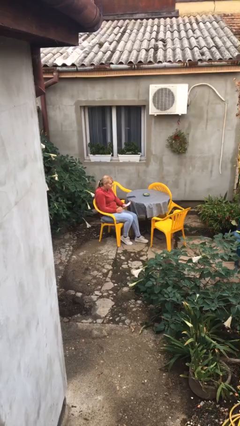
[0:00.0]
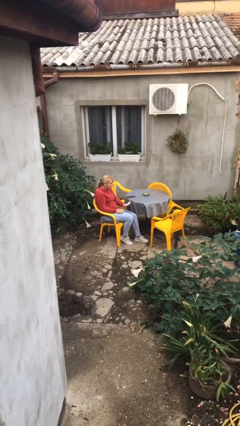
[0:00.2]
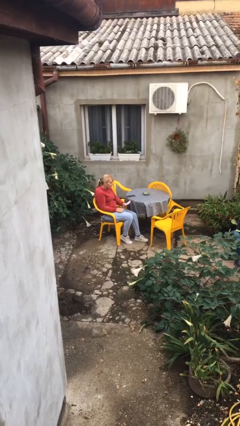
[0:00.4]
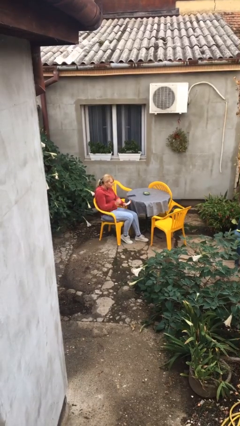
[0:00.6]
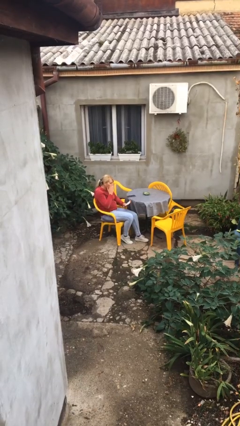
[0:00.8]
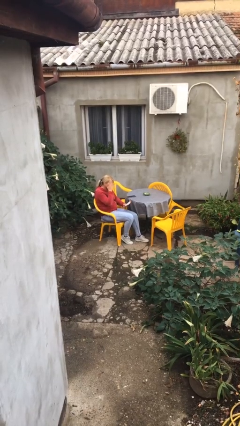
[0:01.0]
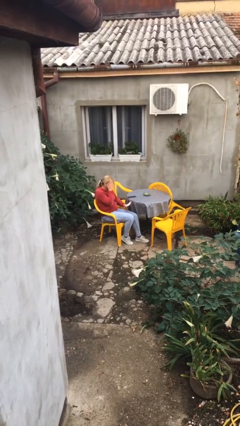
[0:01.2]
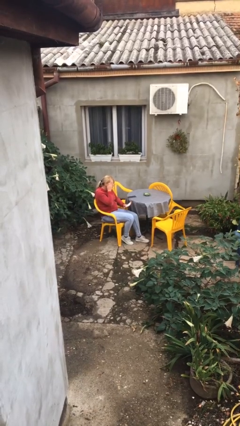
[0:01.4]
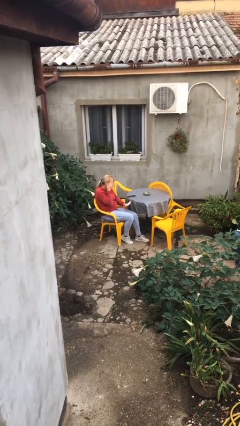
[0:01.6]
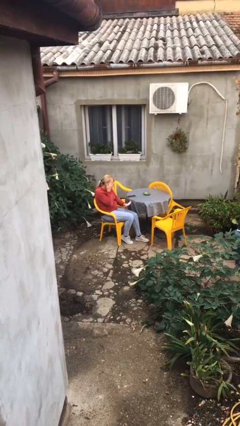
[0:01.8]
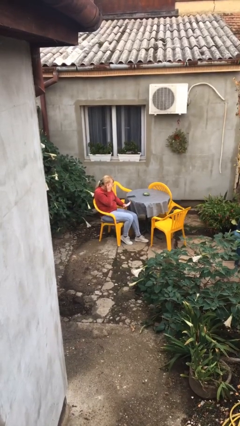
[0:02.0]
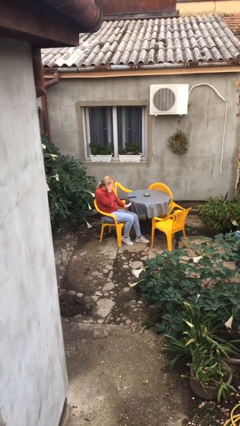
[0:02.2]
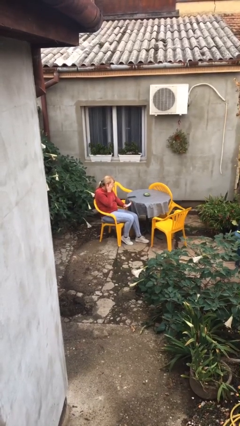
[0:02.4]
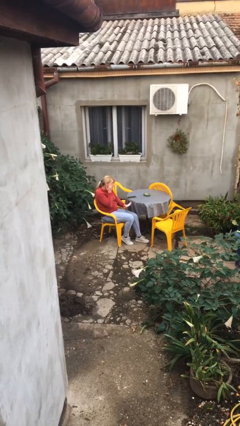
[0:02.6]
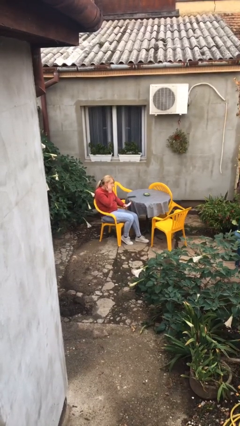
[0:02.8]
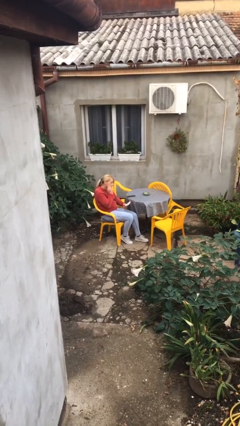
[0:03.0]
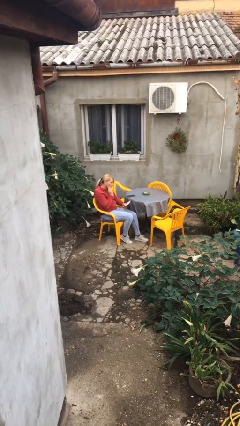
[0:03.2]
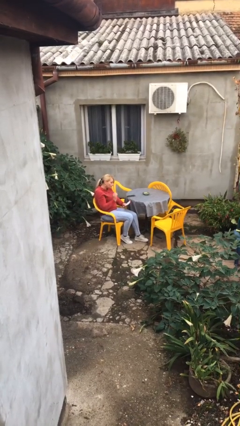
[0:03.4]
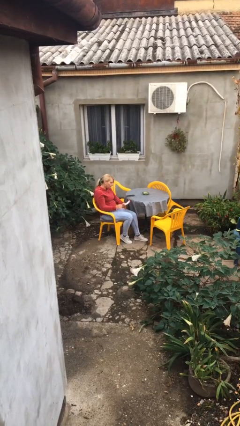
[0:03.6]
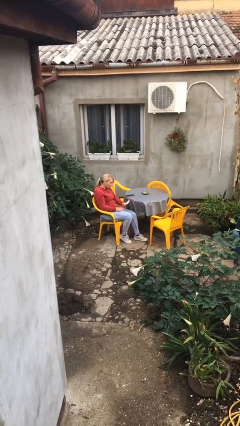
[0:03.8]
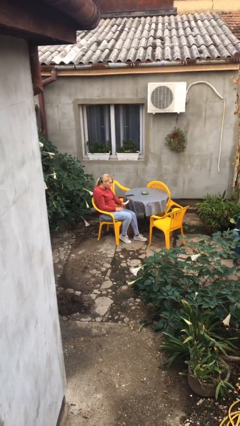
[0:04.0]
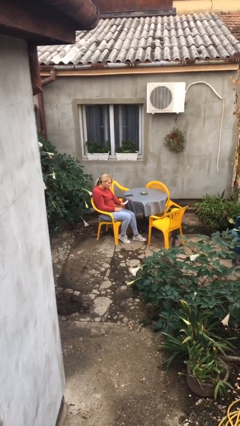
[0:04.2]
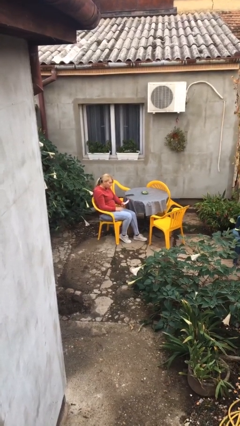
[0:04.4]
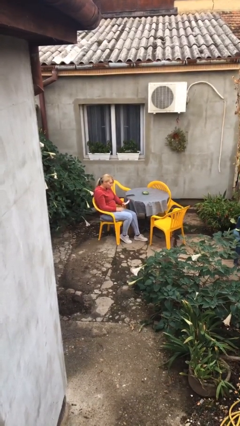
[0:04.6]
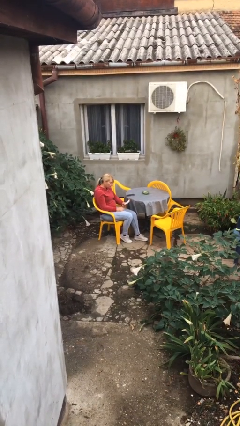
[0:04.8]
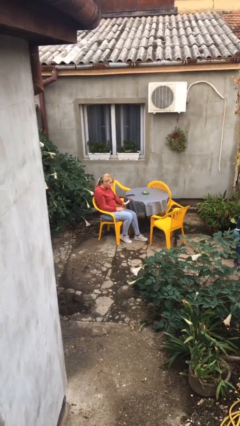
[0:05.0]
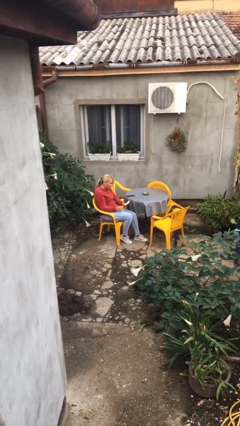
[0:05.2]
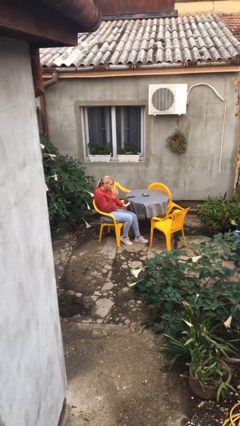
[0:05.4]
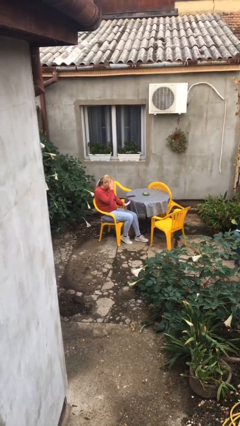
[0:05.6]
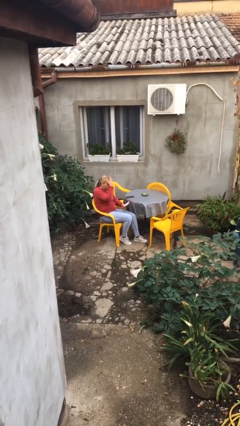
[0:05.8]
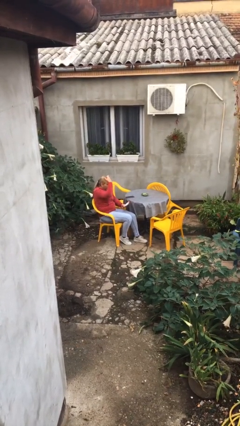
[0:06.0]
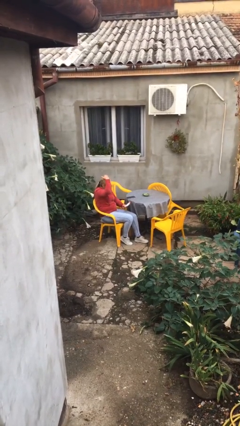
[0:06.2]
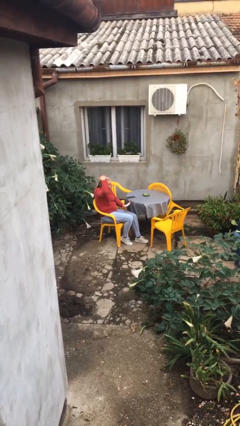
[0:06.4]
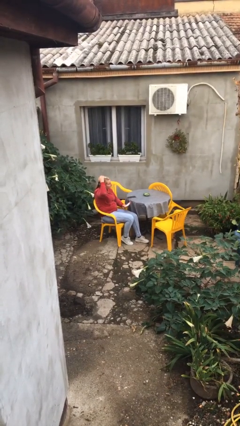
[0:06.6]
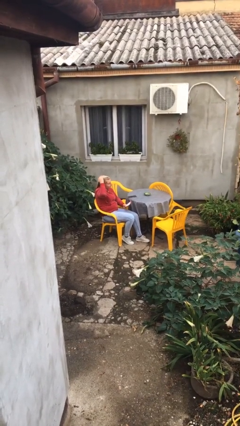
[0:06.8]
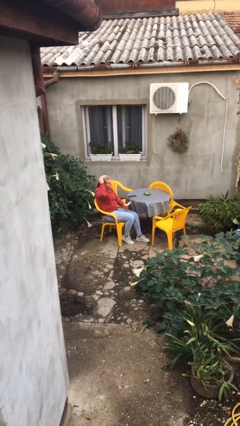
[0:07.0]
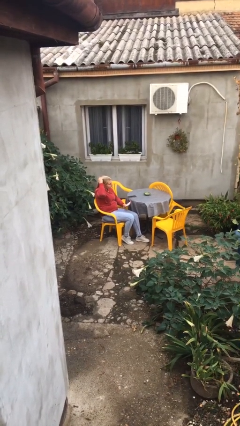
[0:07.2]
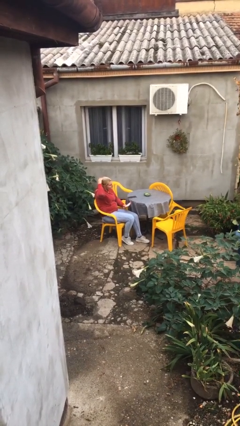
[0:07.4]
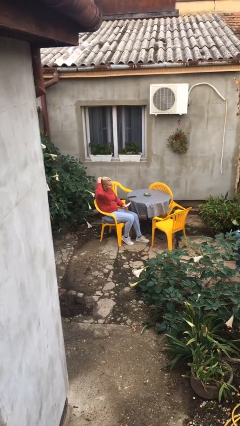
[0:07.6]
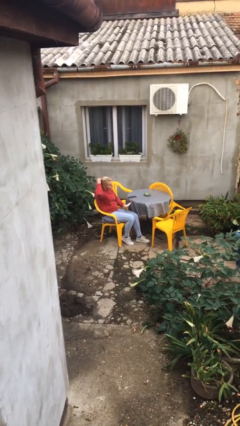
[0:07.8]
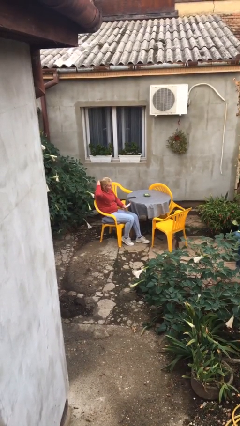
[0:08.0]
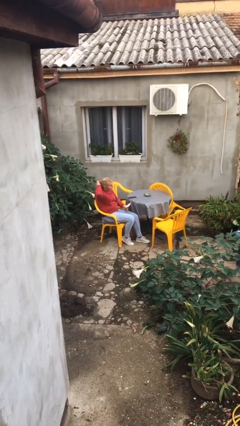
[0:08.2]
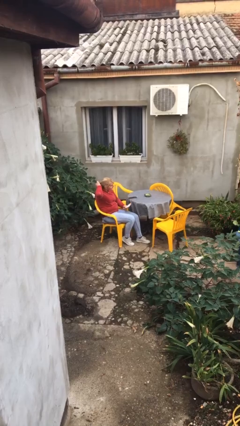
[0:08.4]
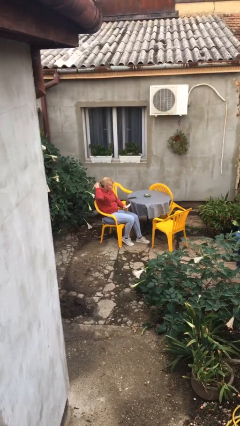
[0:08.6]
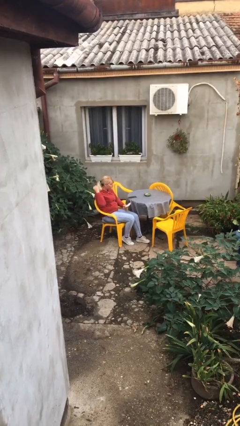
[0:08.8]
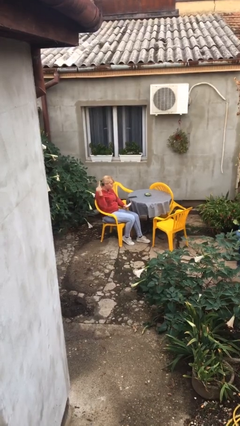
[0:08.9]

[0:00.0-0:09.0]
person reads document

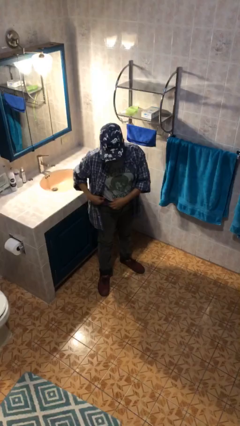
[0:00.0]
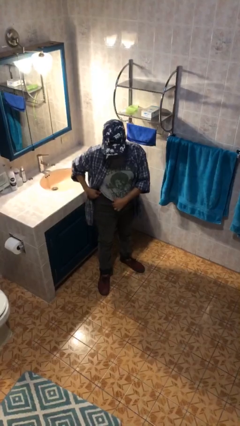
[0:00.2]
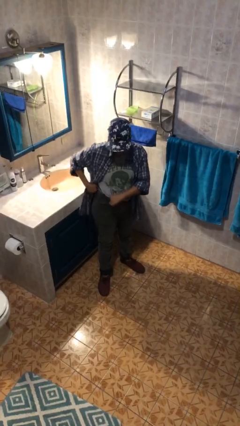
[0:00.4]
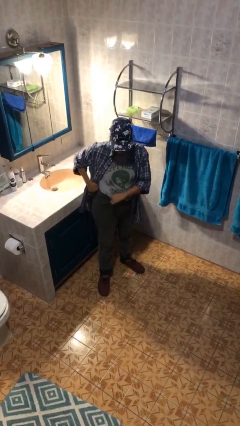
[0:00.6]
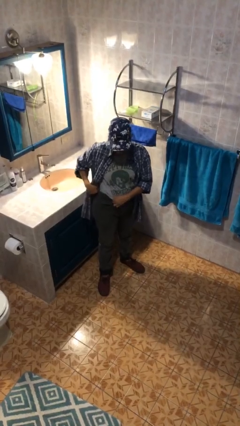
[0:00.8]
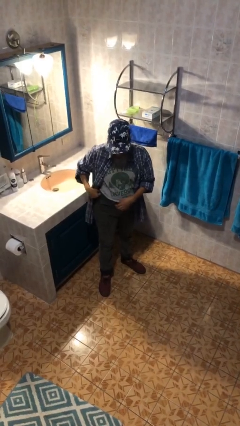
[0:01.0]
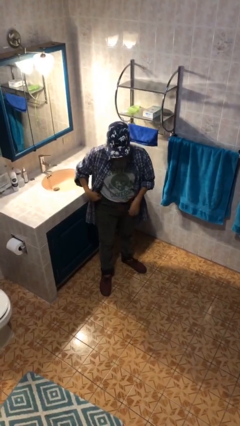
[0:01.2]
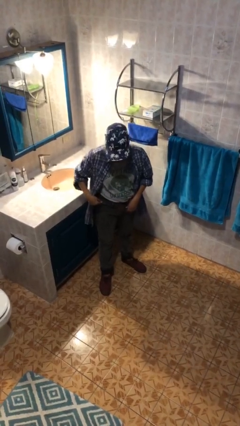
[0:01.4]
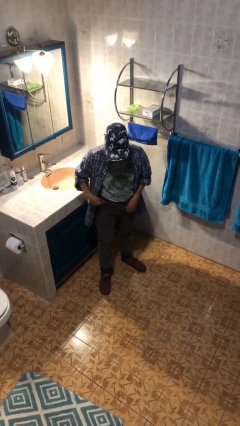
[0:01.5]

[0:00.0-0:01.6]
person hikes up pants

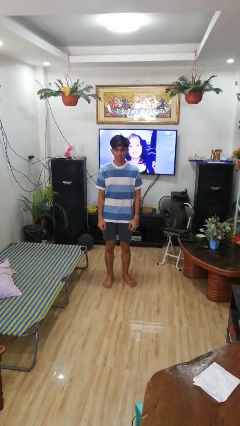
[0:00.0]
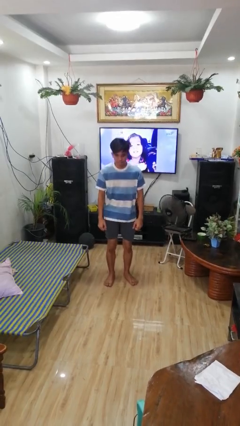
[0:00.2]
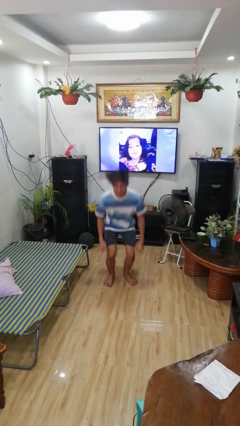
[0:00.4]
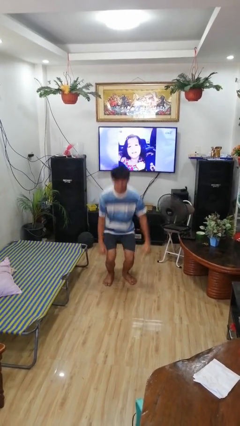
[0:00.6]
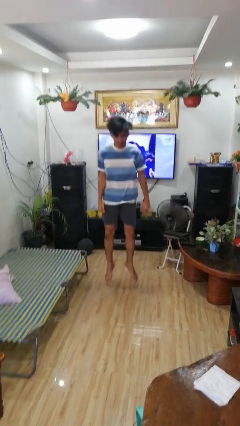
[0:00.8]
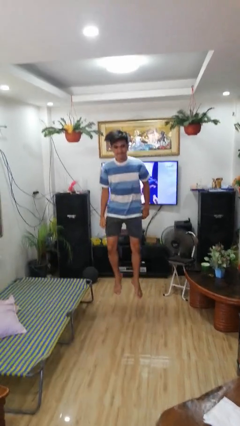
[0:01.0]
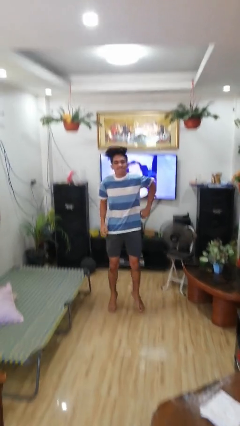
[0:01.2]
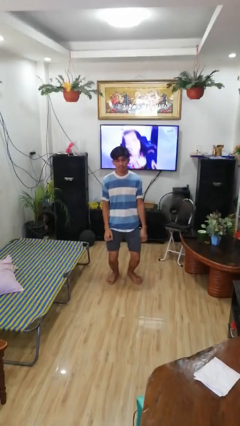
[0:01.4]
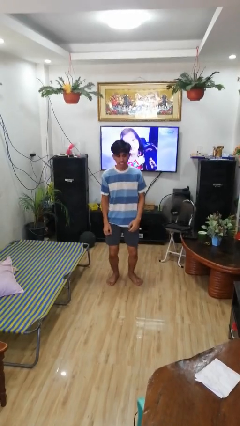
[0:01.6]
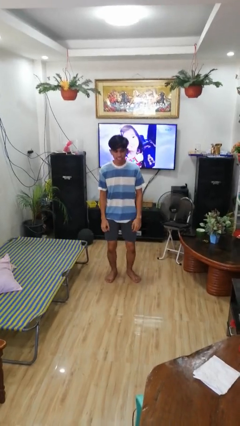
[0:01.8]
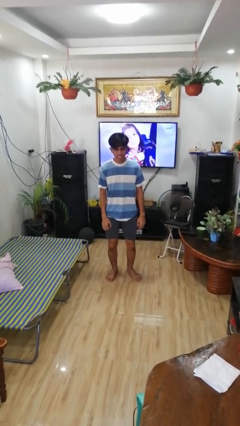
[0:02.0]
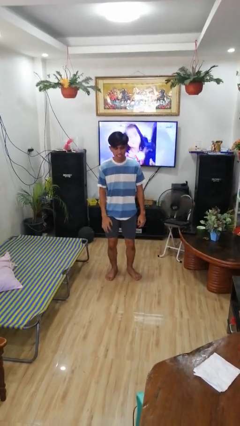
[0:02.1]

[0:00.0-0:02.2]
person jumps

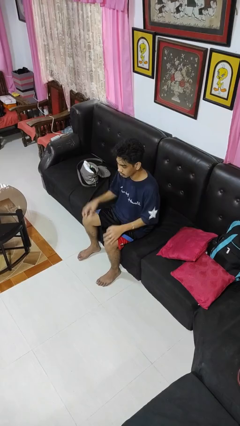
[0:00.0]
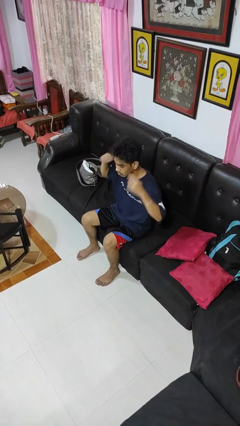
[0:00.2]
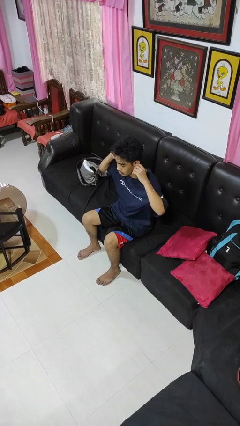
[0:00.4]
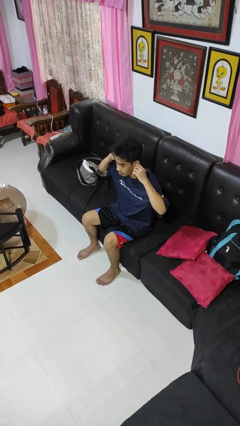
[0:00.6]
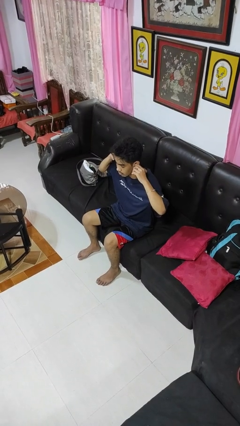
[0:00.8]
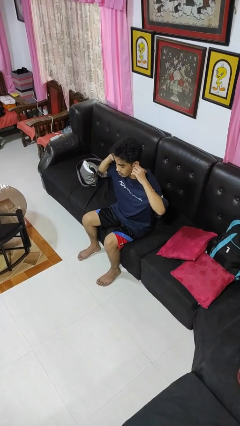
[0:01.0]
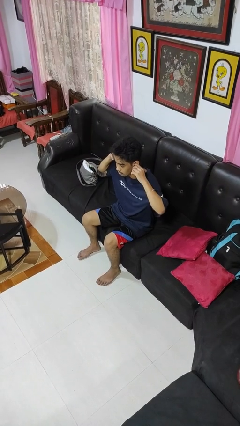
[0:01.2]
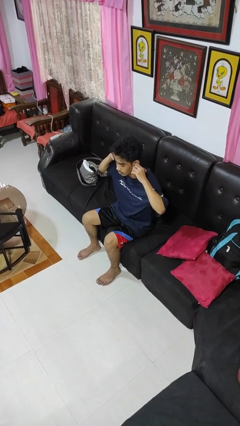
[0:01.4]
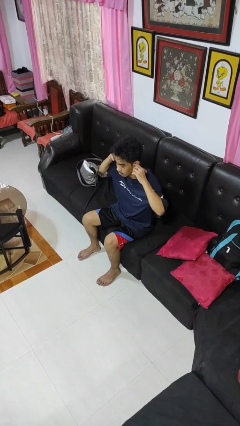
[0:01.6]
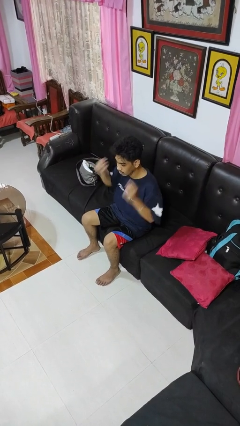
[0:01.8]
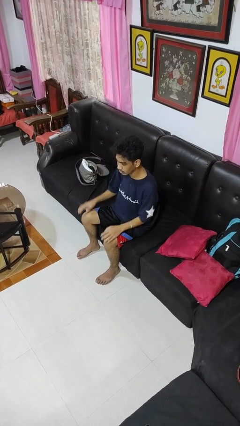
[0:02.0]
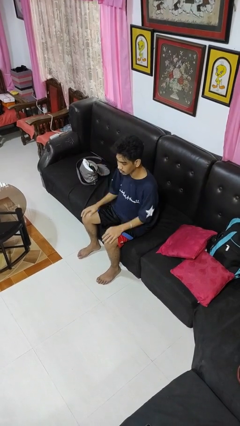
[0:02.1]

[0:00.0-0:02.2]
person puts fingers in ear

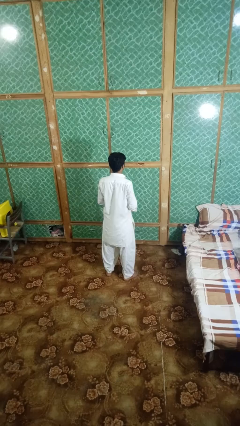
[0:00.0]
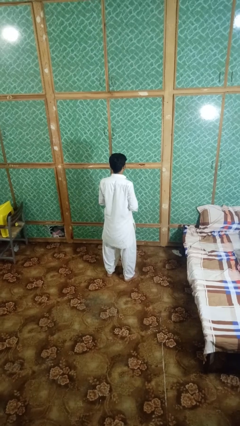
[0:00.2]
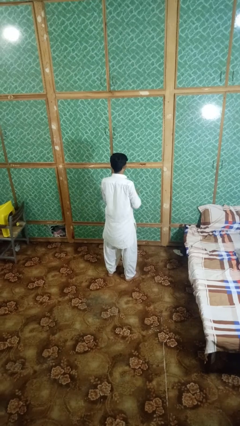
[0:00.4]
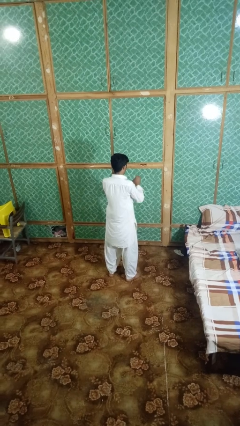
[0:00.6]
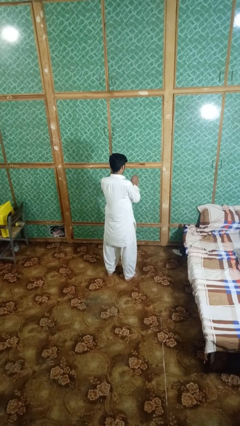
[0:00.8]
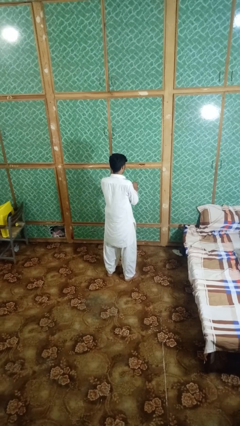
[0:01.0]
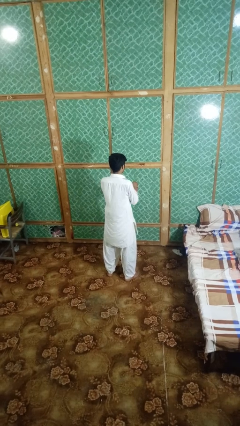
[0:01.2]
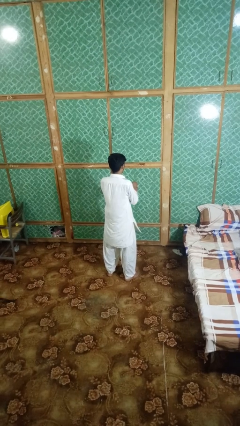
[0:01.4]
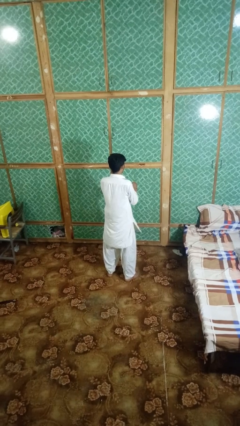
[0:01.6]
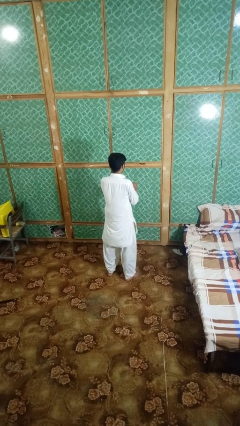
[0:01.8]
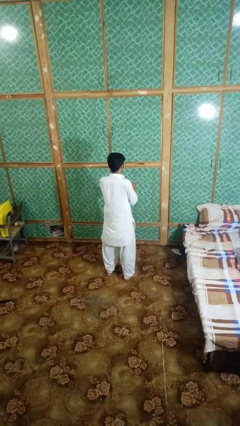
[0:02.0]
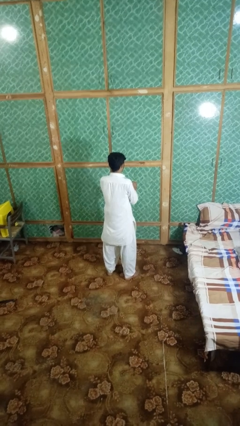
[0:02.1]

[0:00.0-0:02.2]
person opens beverage can

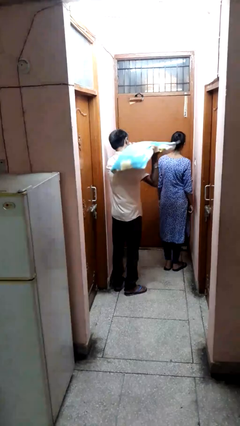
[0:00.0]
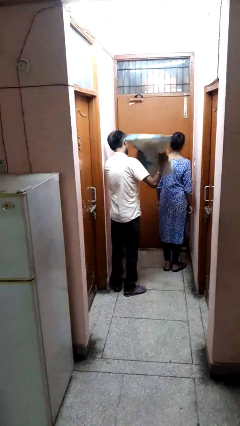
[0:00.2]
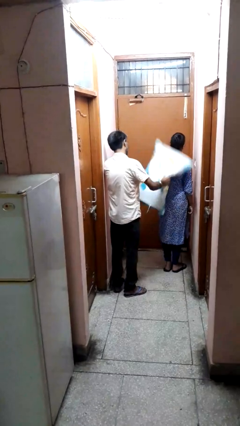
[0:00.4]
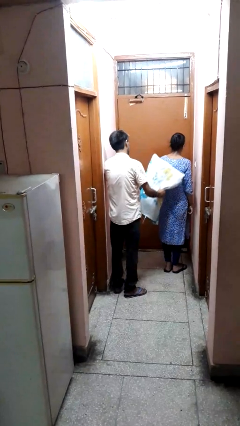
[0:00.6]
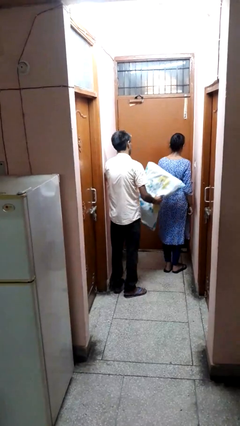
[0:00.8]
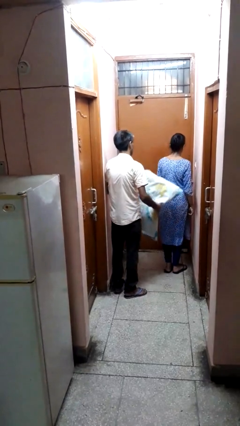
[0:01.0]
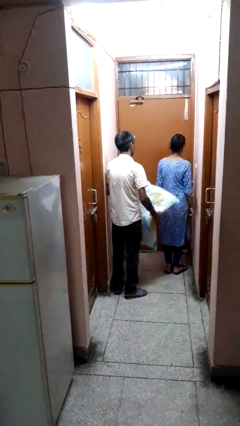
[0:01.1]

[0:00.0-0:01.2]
person hits person with pillow
